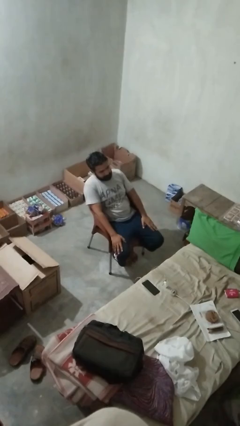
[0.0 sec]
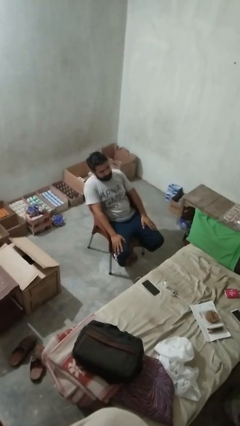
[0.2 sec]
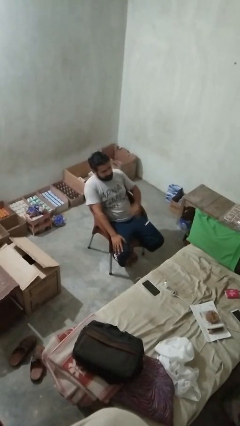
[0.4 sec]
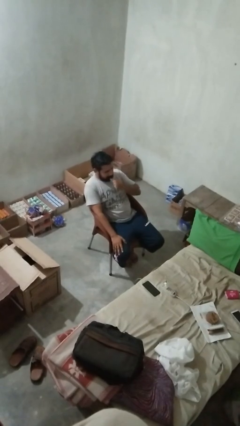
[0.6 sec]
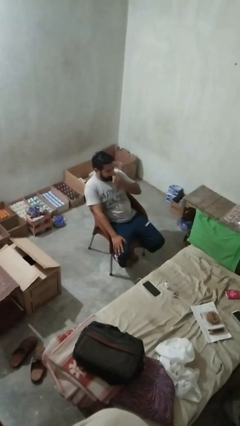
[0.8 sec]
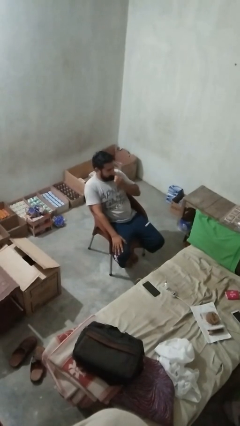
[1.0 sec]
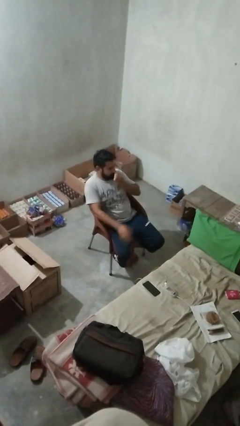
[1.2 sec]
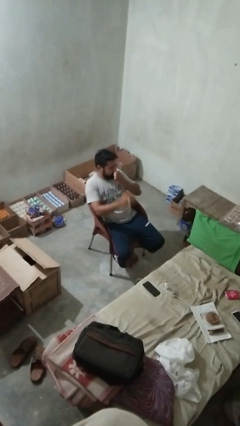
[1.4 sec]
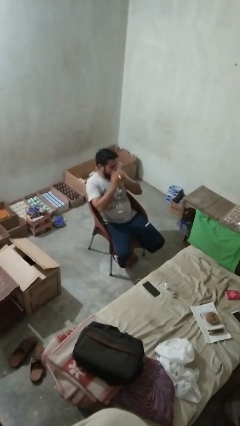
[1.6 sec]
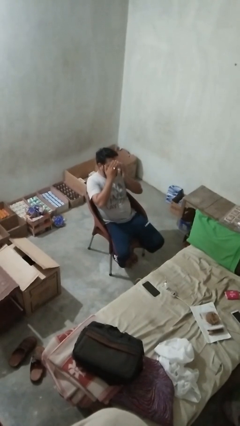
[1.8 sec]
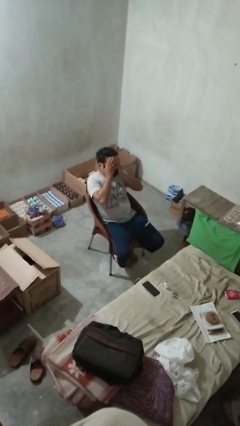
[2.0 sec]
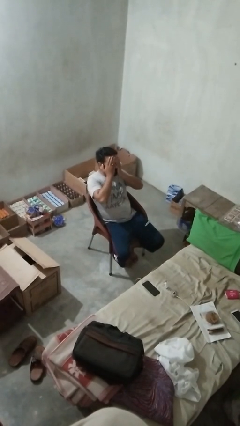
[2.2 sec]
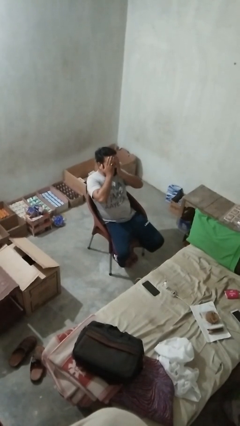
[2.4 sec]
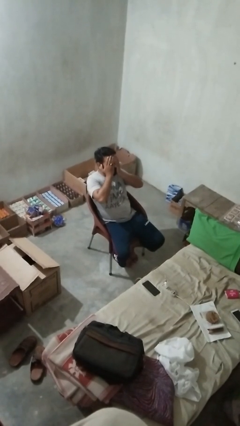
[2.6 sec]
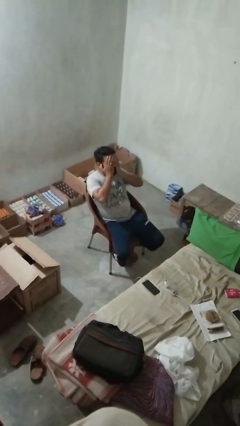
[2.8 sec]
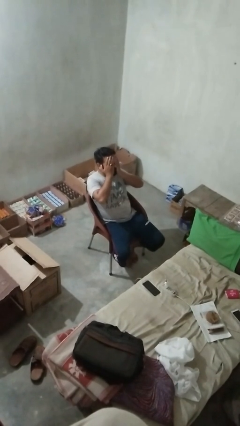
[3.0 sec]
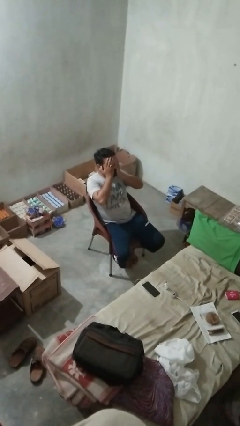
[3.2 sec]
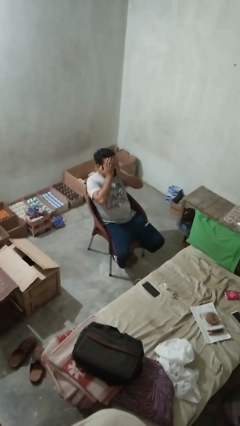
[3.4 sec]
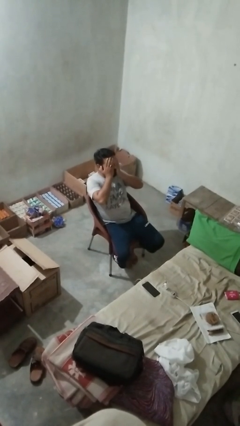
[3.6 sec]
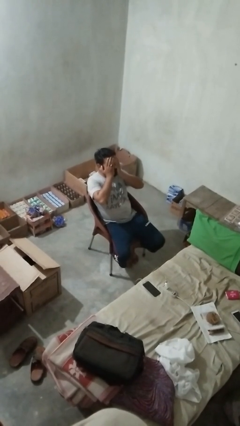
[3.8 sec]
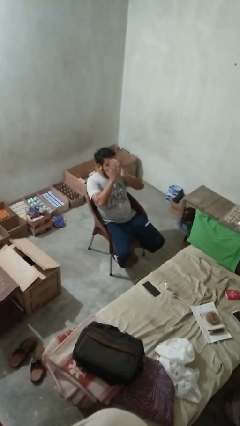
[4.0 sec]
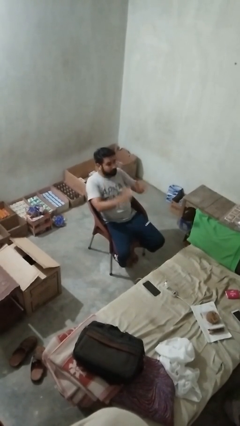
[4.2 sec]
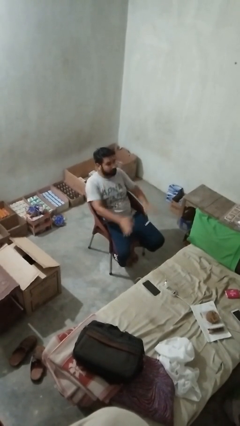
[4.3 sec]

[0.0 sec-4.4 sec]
person covers face with hands

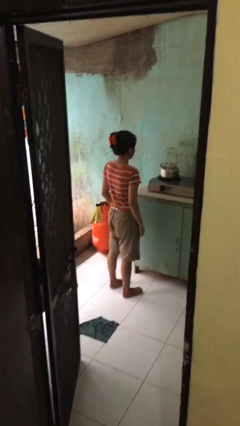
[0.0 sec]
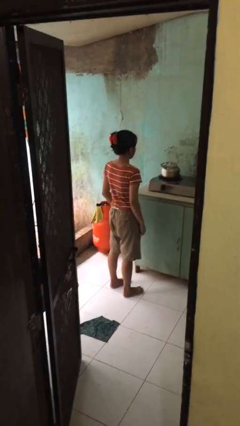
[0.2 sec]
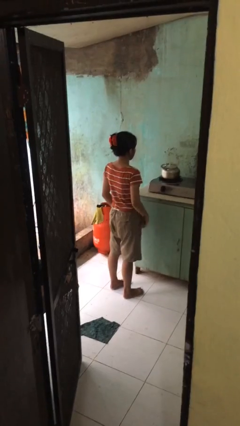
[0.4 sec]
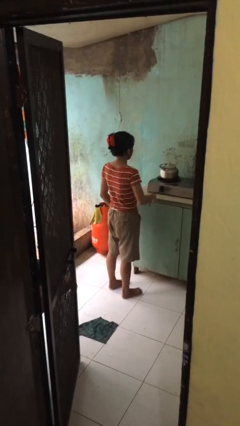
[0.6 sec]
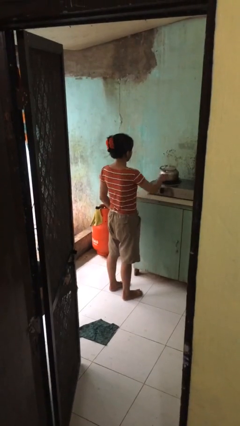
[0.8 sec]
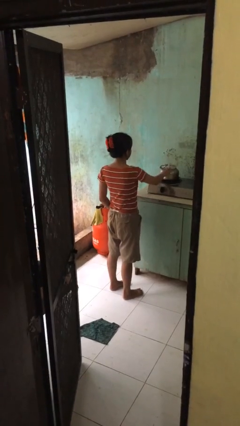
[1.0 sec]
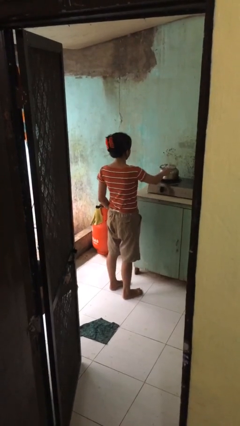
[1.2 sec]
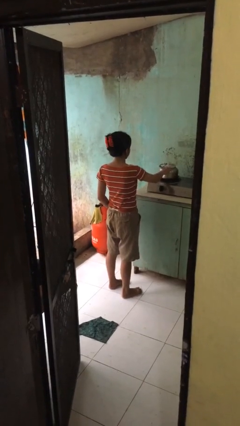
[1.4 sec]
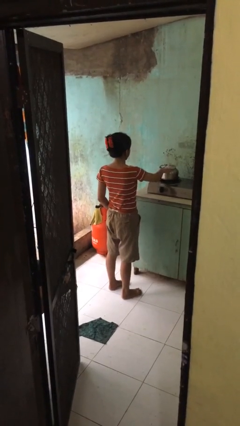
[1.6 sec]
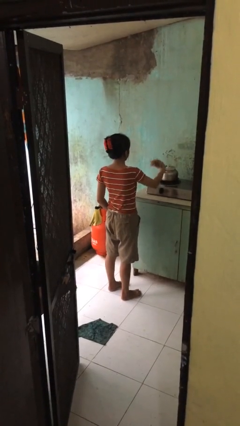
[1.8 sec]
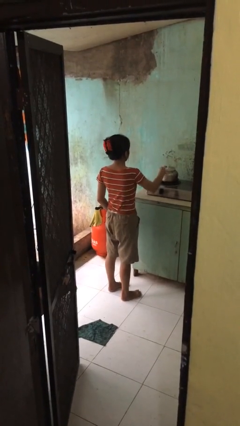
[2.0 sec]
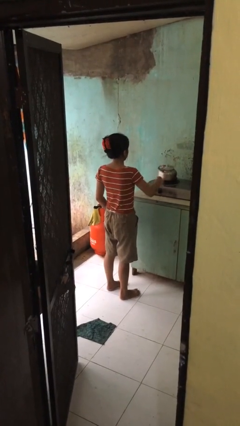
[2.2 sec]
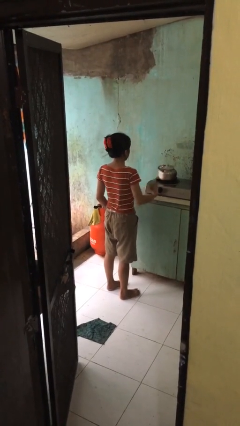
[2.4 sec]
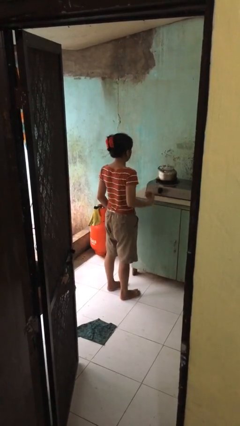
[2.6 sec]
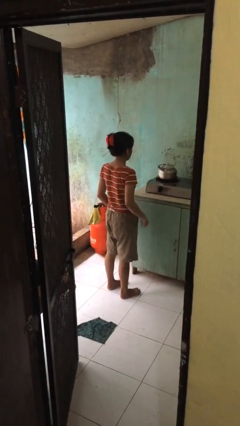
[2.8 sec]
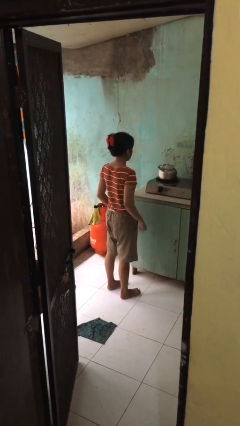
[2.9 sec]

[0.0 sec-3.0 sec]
person burns hand

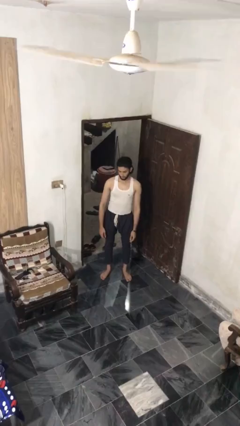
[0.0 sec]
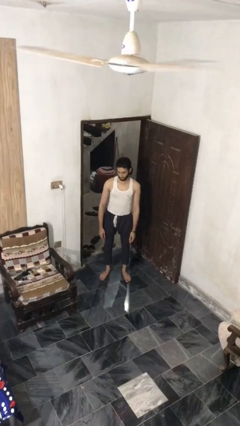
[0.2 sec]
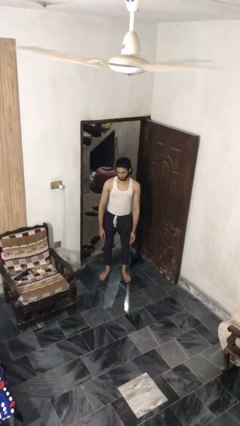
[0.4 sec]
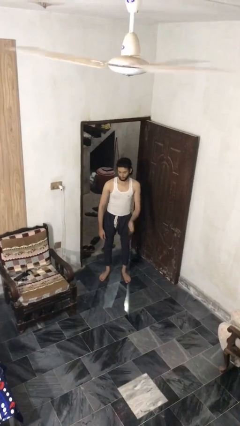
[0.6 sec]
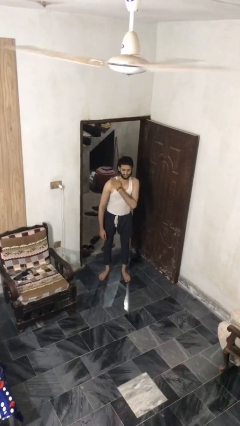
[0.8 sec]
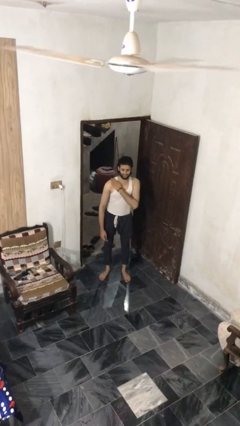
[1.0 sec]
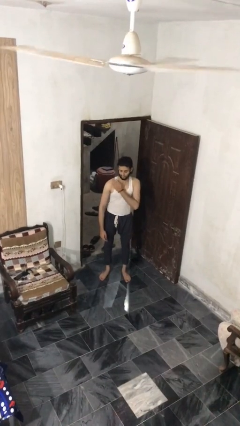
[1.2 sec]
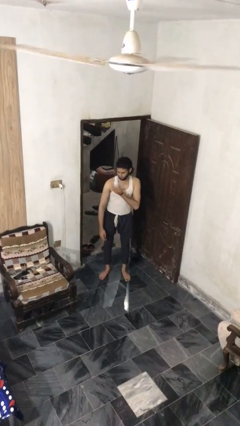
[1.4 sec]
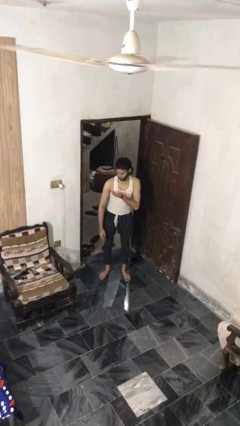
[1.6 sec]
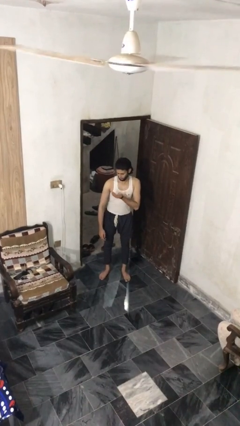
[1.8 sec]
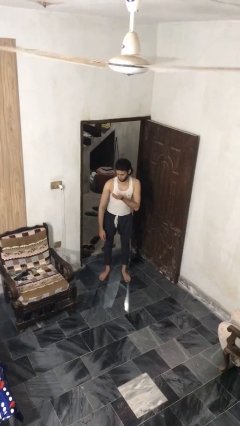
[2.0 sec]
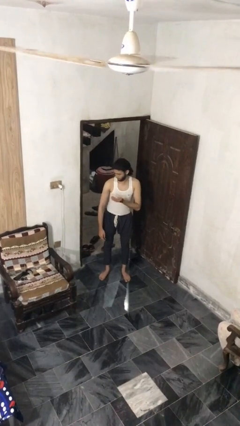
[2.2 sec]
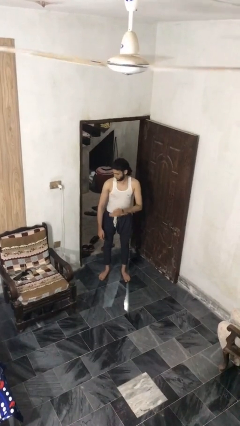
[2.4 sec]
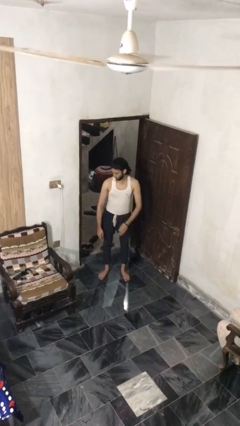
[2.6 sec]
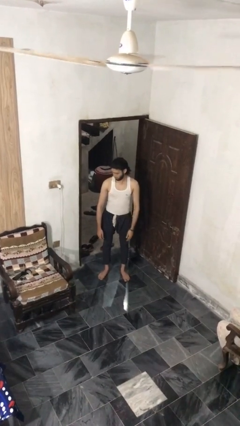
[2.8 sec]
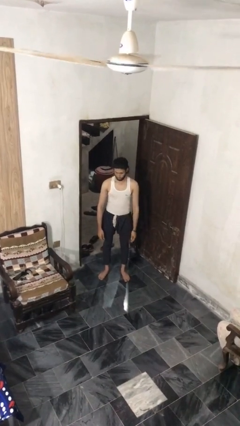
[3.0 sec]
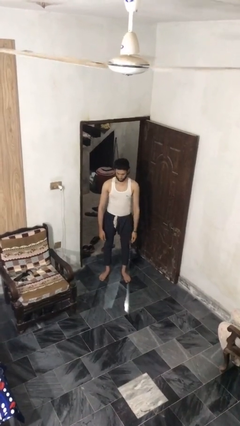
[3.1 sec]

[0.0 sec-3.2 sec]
person swats bug

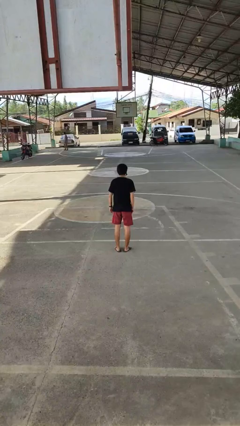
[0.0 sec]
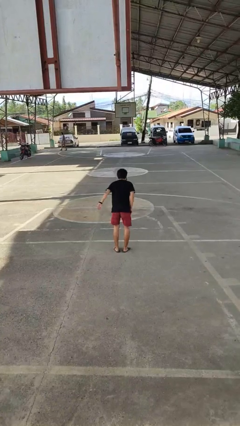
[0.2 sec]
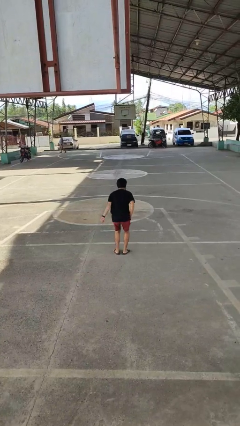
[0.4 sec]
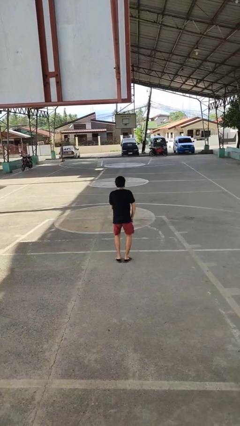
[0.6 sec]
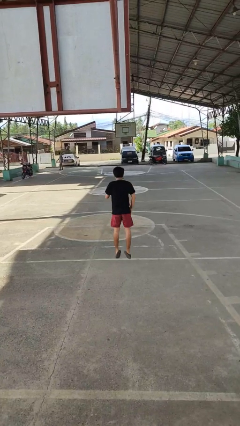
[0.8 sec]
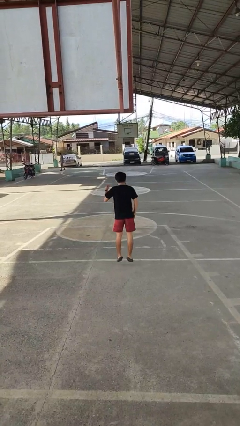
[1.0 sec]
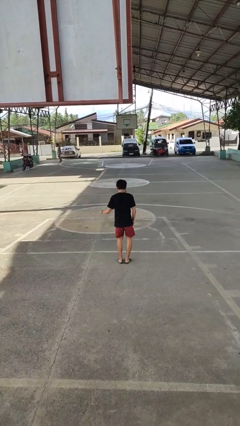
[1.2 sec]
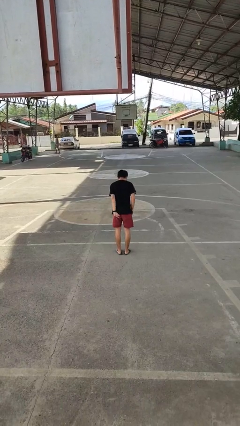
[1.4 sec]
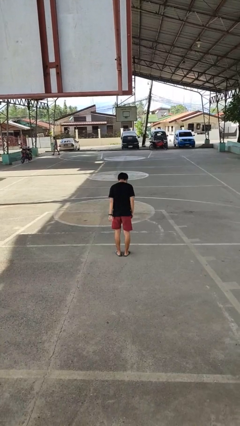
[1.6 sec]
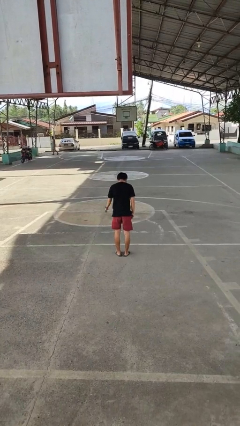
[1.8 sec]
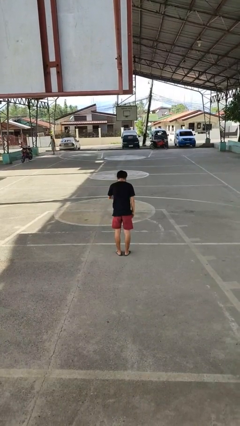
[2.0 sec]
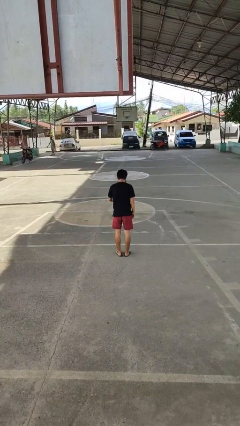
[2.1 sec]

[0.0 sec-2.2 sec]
person jumps

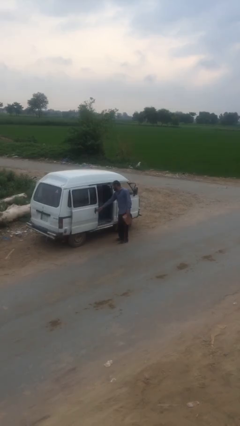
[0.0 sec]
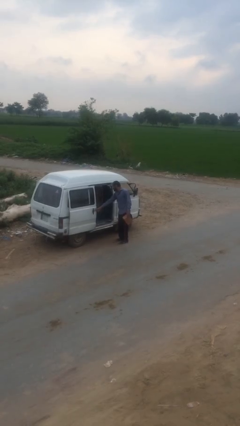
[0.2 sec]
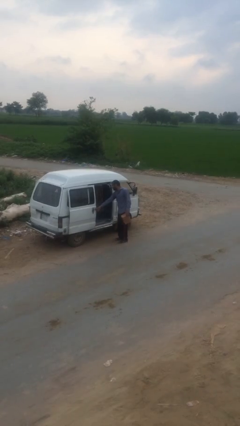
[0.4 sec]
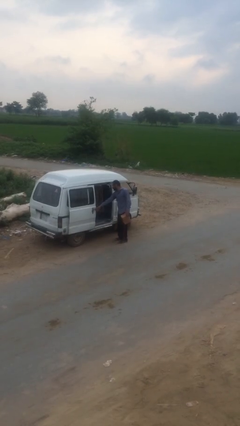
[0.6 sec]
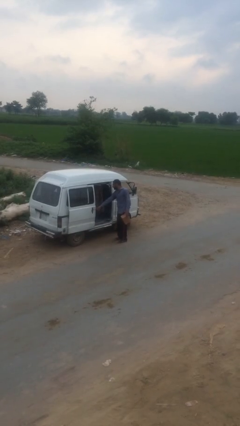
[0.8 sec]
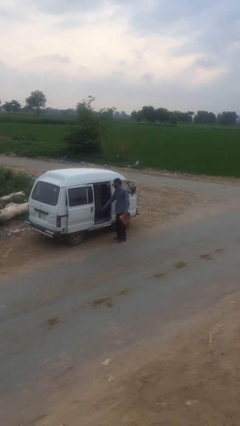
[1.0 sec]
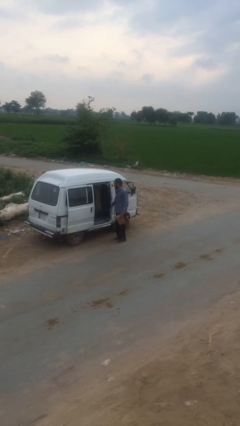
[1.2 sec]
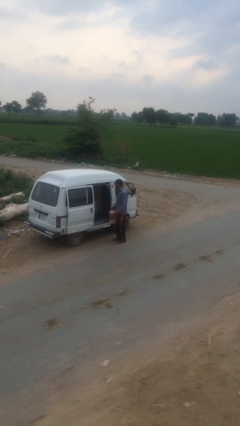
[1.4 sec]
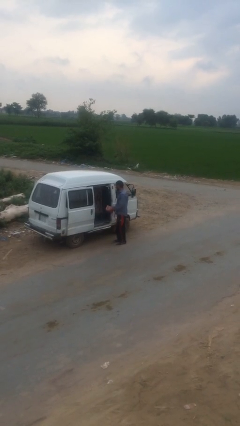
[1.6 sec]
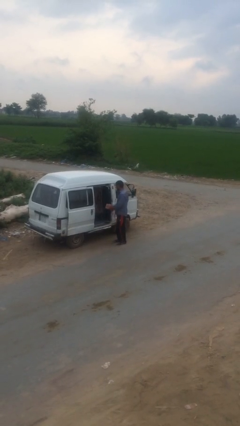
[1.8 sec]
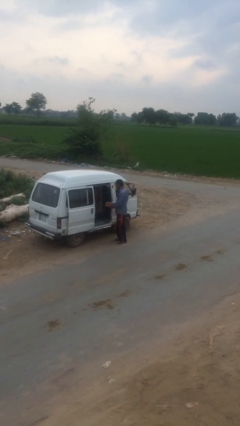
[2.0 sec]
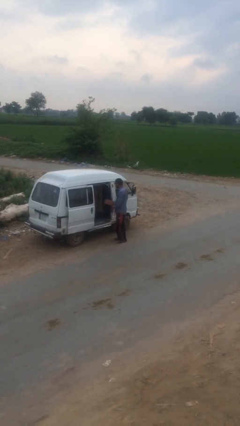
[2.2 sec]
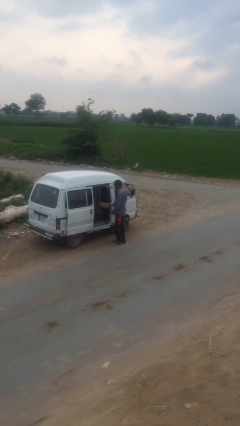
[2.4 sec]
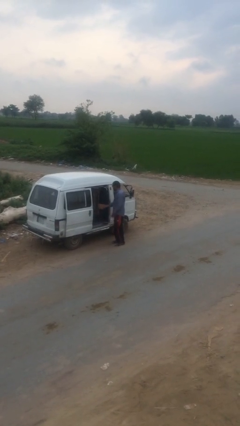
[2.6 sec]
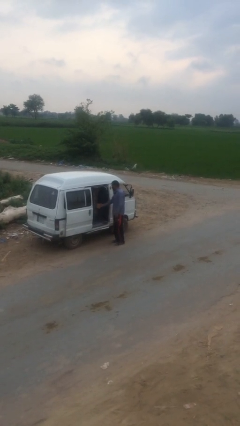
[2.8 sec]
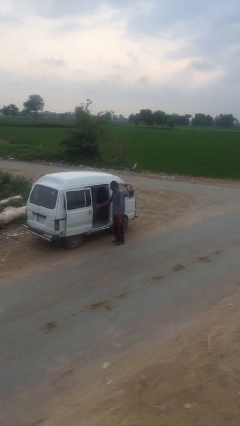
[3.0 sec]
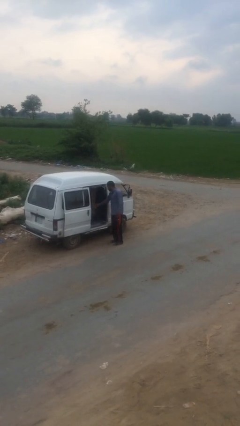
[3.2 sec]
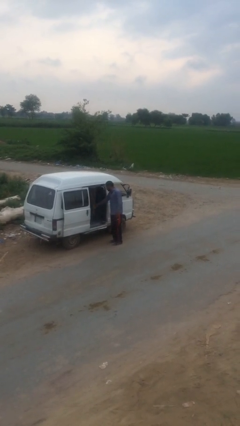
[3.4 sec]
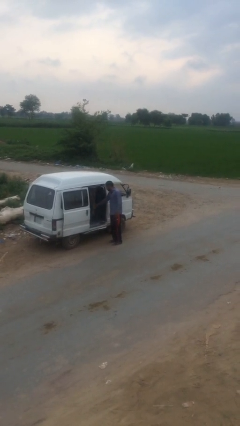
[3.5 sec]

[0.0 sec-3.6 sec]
person loads car

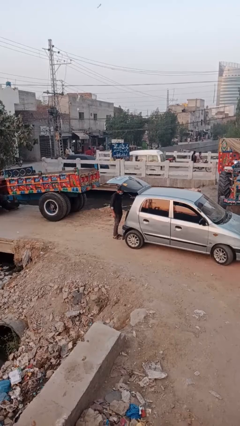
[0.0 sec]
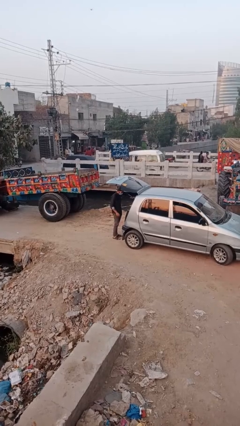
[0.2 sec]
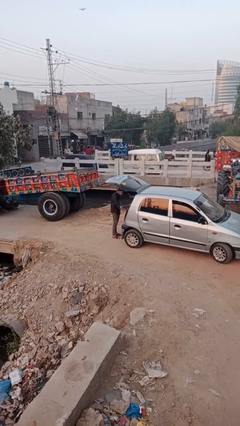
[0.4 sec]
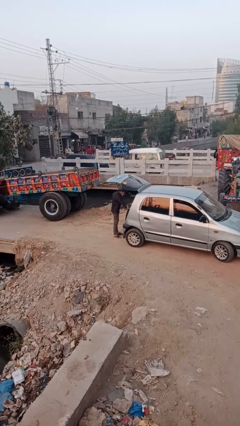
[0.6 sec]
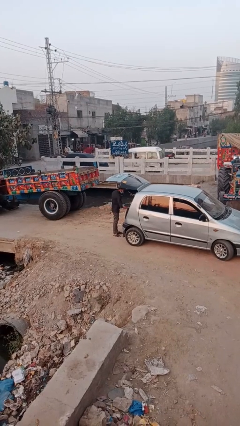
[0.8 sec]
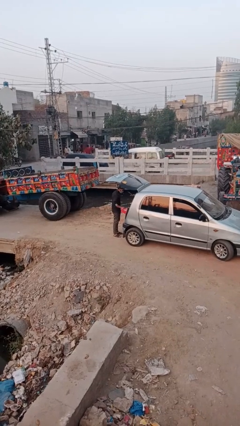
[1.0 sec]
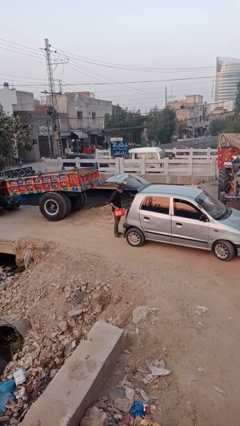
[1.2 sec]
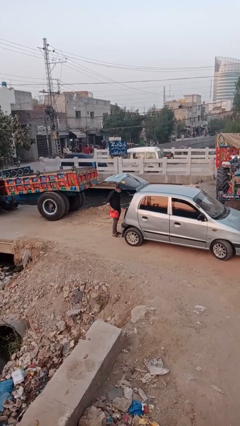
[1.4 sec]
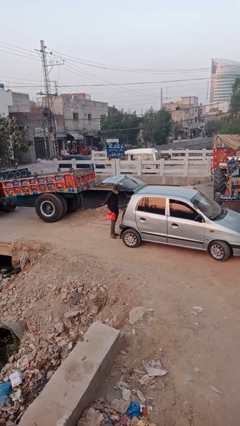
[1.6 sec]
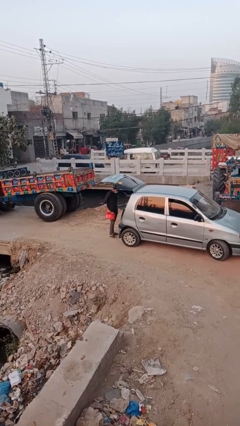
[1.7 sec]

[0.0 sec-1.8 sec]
person unloads car
